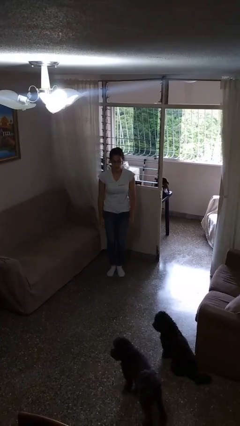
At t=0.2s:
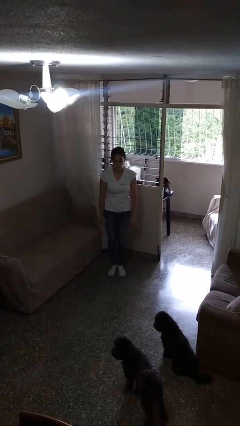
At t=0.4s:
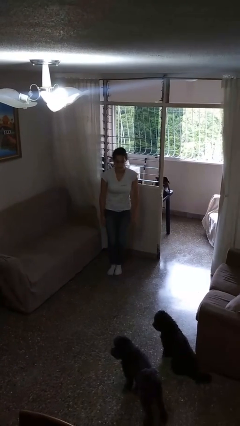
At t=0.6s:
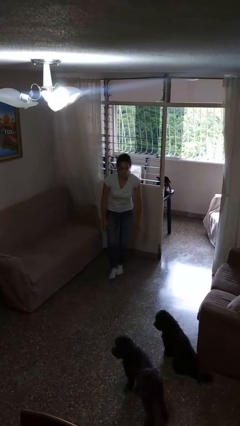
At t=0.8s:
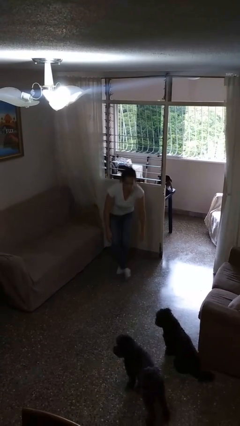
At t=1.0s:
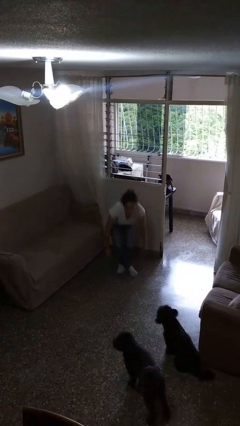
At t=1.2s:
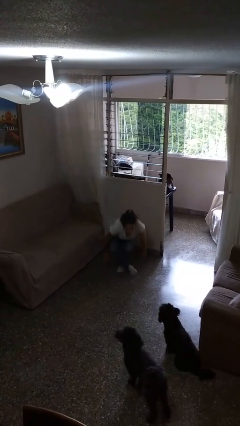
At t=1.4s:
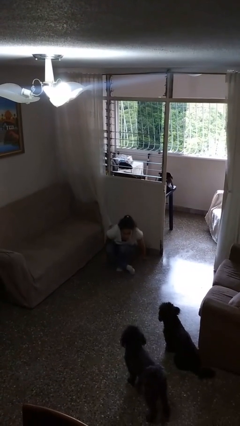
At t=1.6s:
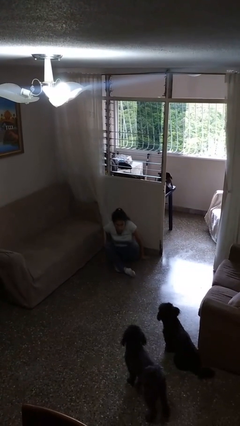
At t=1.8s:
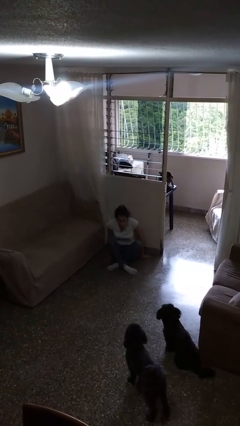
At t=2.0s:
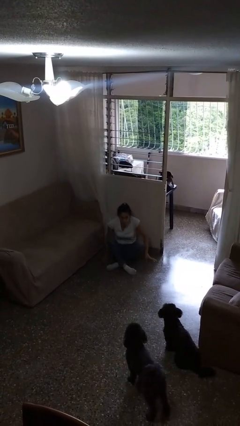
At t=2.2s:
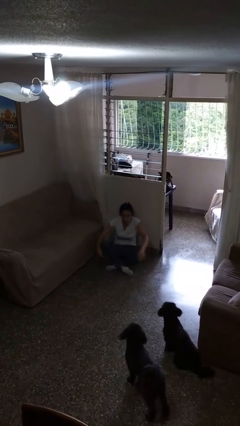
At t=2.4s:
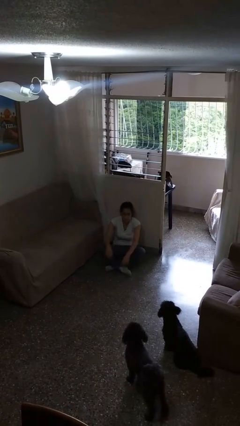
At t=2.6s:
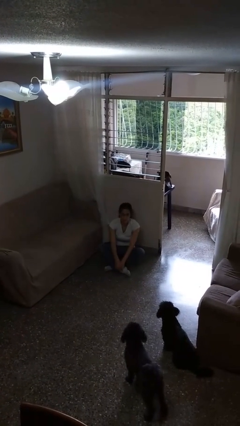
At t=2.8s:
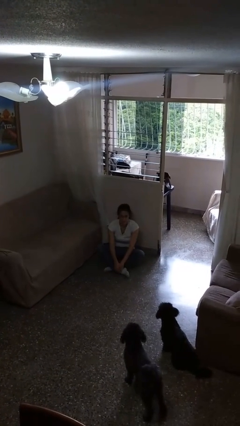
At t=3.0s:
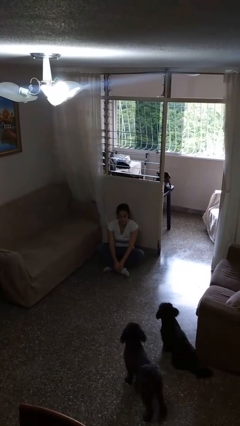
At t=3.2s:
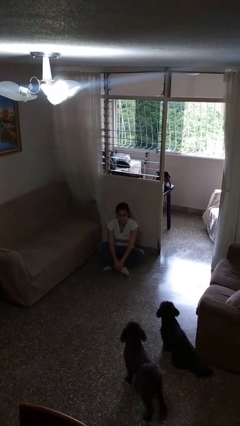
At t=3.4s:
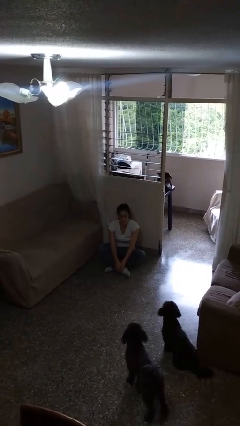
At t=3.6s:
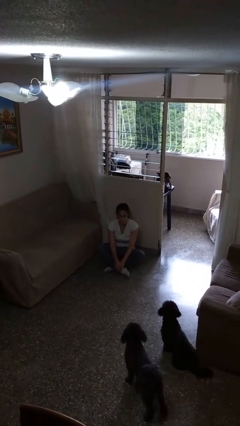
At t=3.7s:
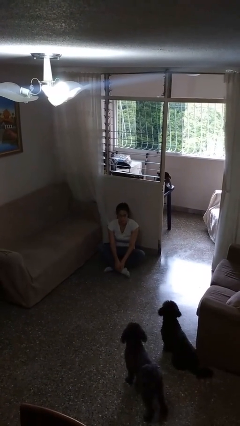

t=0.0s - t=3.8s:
person sits crisscross

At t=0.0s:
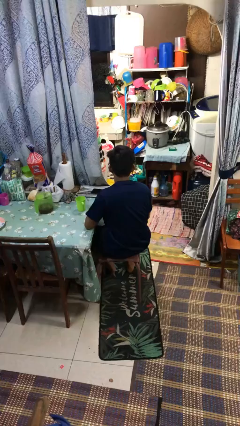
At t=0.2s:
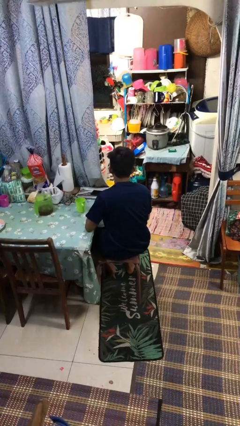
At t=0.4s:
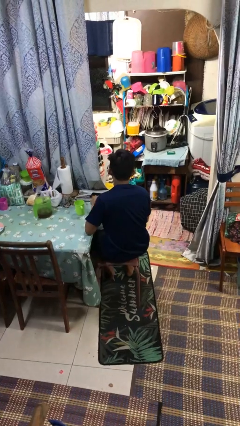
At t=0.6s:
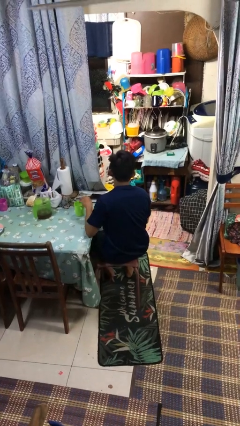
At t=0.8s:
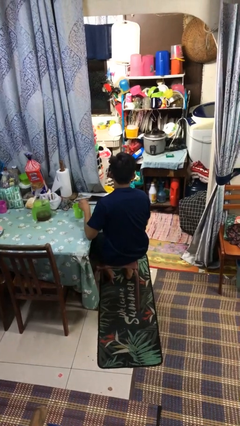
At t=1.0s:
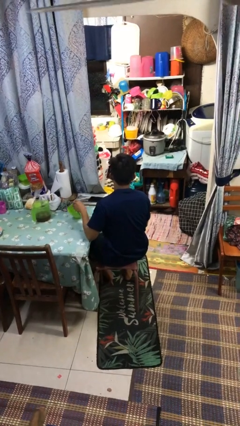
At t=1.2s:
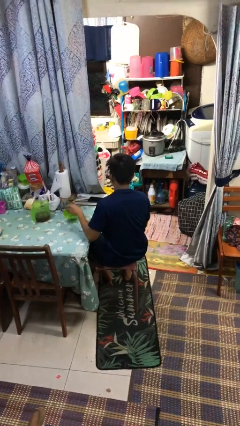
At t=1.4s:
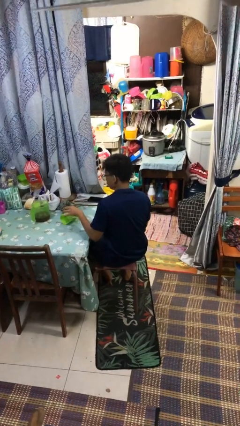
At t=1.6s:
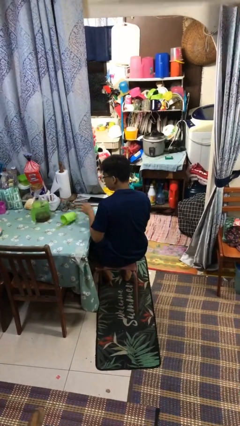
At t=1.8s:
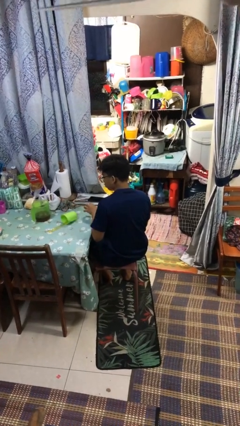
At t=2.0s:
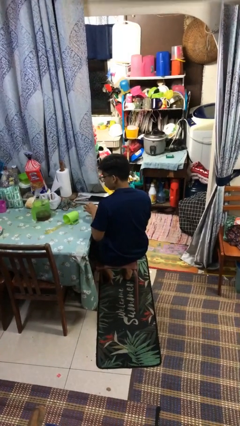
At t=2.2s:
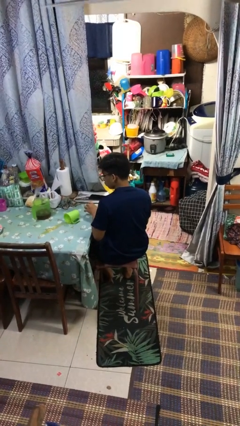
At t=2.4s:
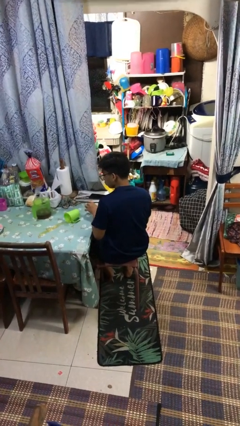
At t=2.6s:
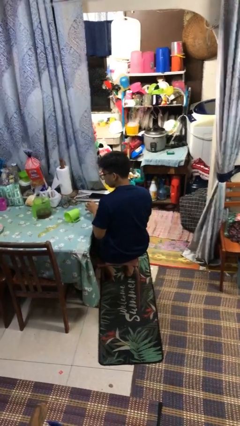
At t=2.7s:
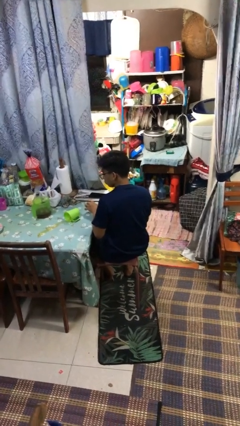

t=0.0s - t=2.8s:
person spills on table

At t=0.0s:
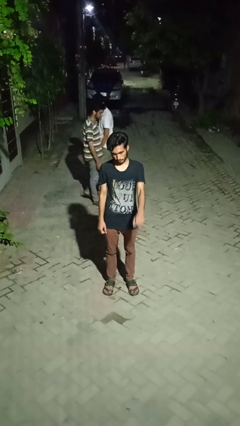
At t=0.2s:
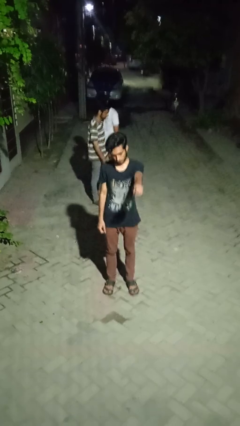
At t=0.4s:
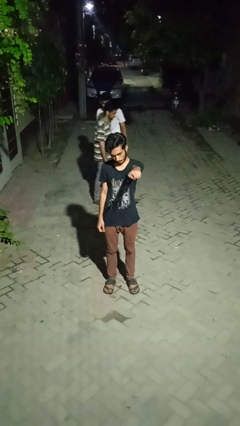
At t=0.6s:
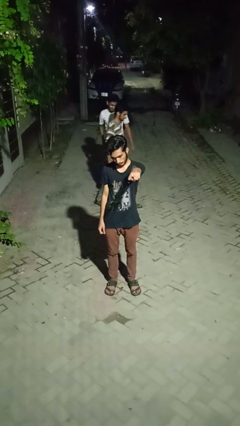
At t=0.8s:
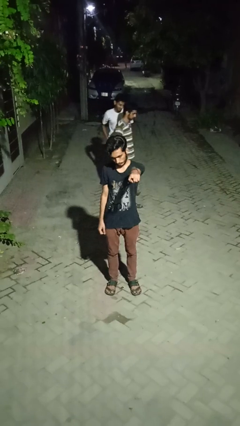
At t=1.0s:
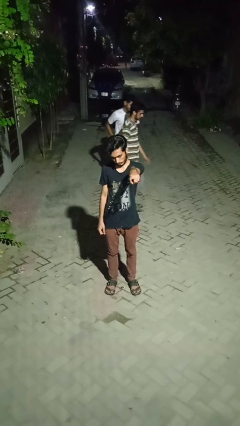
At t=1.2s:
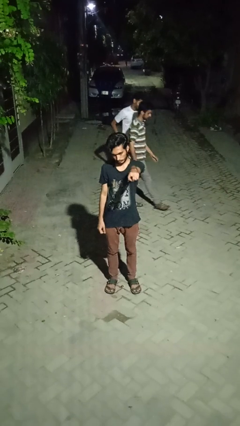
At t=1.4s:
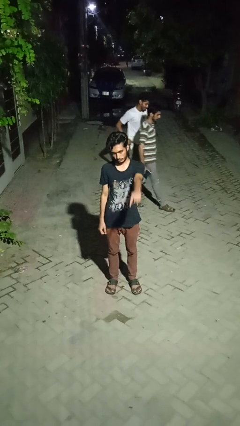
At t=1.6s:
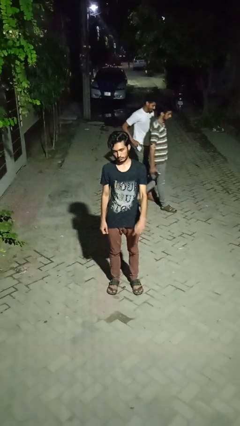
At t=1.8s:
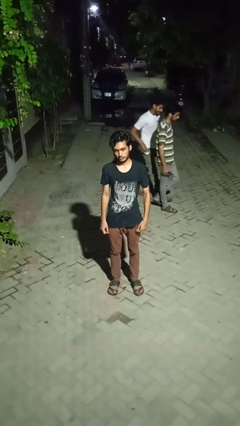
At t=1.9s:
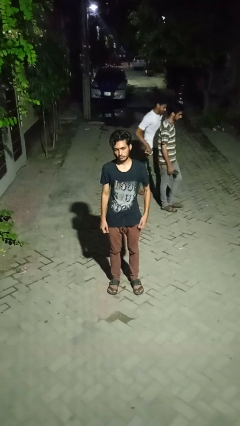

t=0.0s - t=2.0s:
person points at person

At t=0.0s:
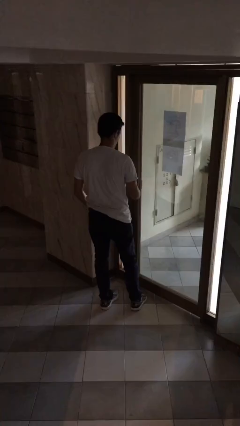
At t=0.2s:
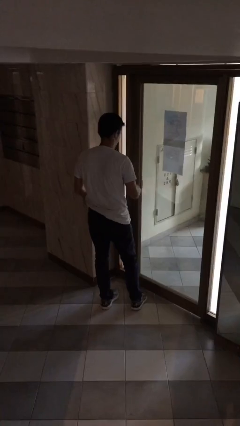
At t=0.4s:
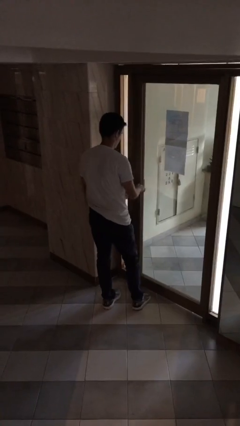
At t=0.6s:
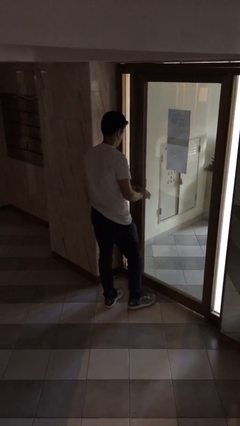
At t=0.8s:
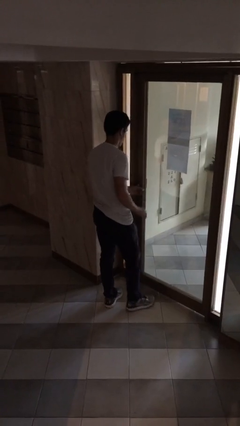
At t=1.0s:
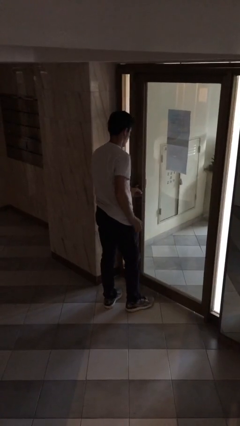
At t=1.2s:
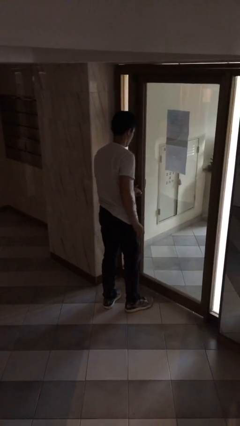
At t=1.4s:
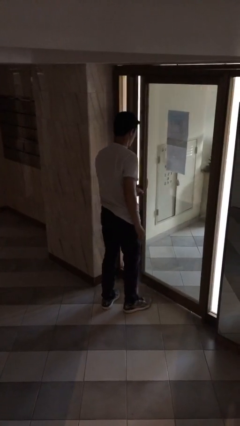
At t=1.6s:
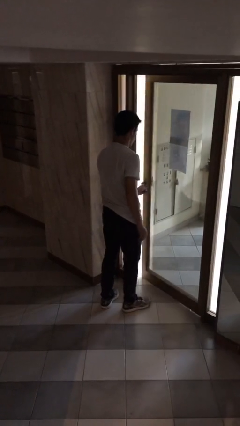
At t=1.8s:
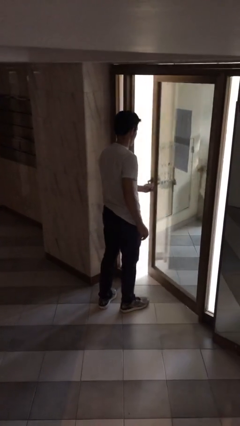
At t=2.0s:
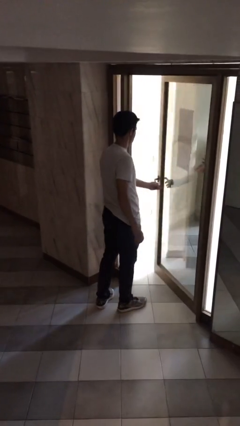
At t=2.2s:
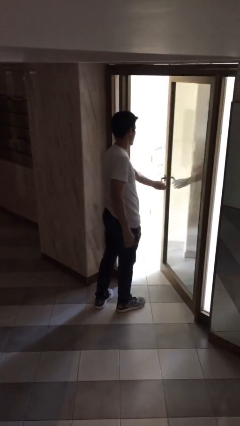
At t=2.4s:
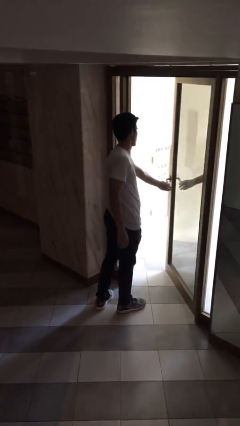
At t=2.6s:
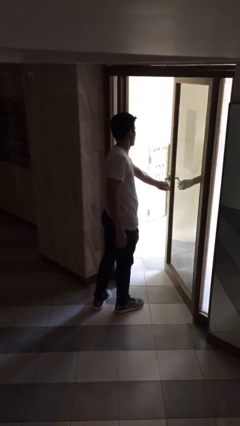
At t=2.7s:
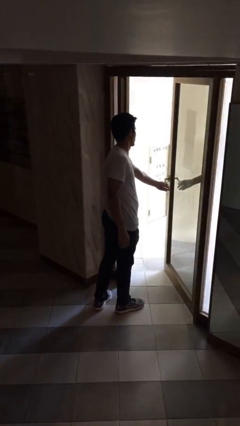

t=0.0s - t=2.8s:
person opens facility door

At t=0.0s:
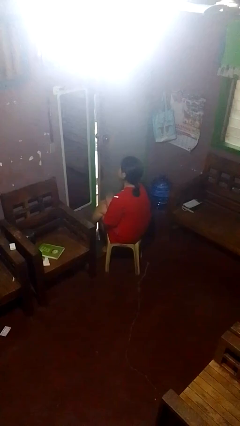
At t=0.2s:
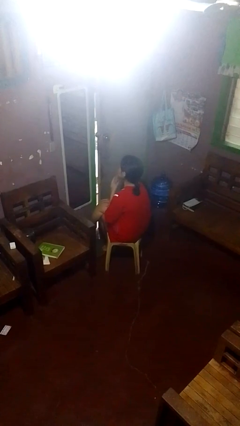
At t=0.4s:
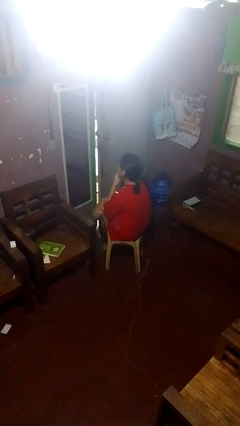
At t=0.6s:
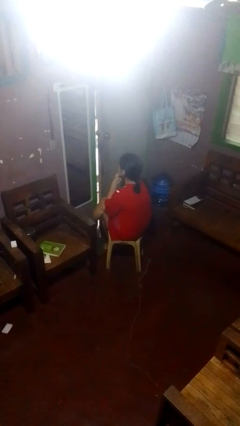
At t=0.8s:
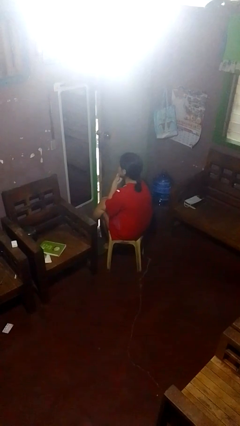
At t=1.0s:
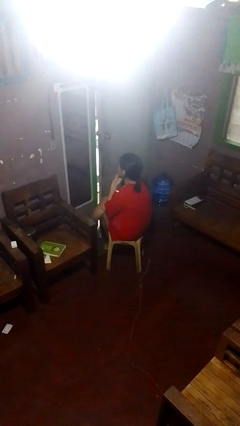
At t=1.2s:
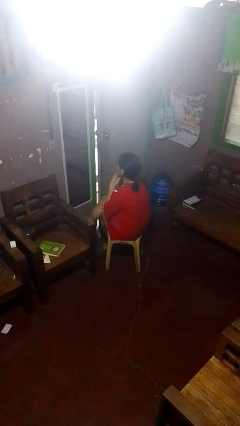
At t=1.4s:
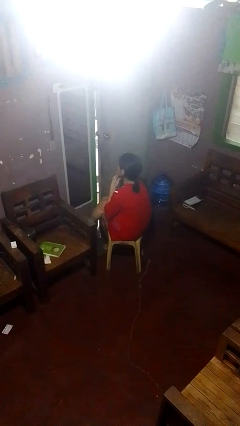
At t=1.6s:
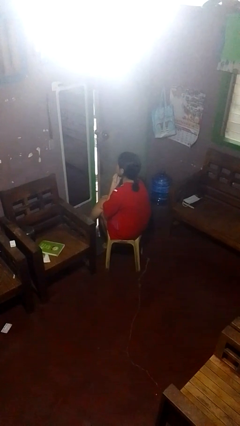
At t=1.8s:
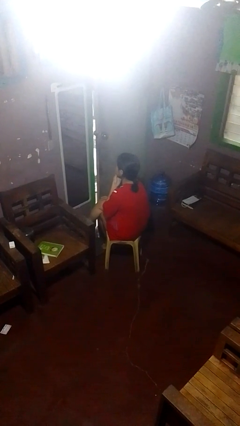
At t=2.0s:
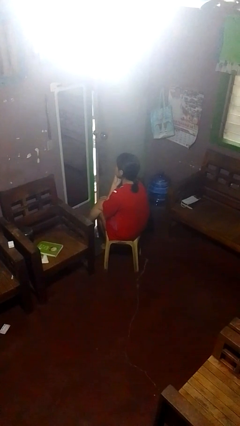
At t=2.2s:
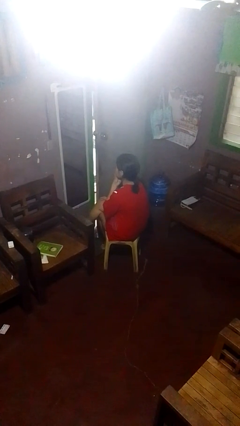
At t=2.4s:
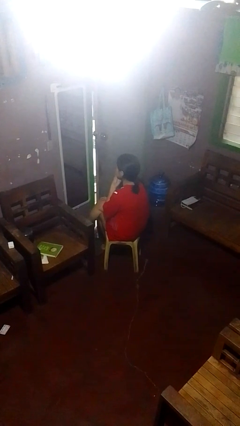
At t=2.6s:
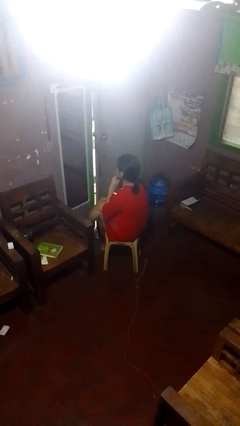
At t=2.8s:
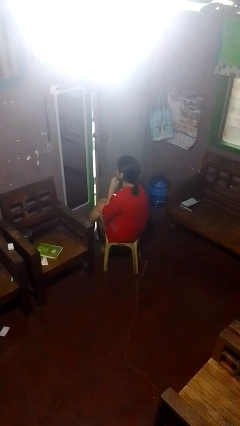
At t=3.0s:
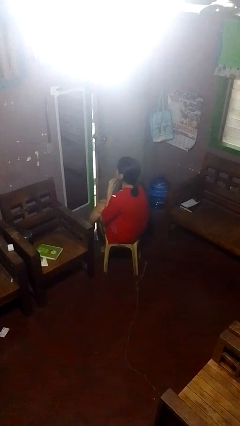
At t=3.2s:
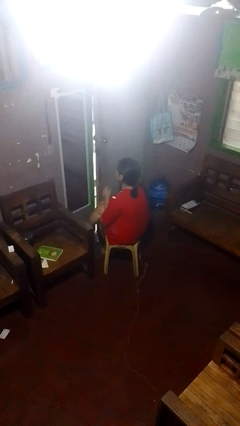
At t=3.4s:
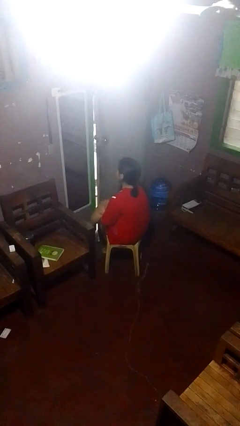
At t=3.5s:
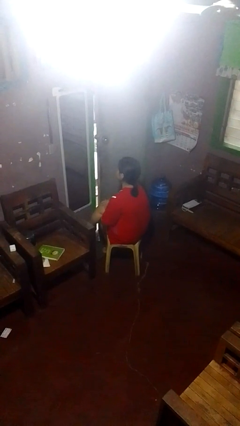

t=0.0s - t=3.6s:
person strokes chin

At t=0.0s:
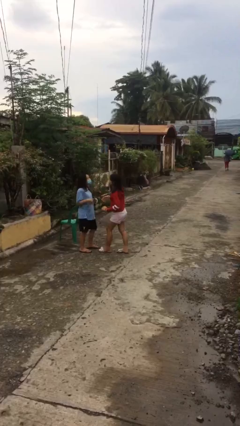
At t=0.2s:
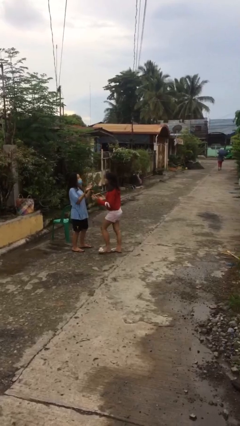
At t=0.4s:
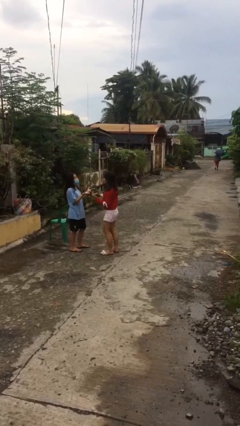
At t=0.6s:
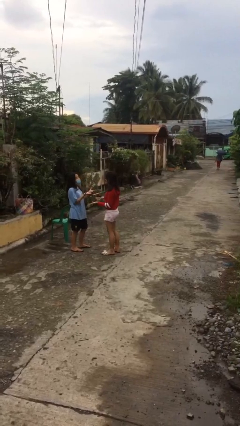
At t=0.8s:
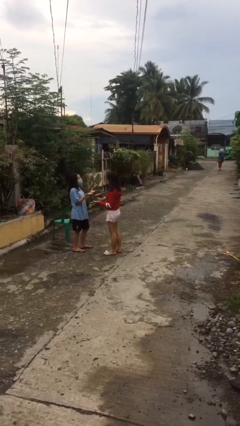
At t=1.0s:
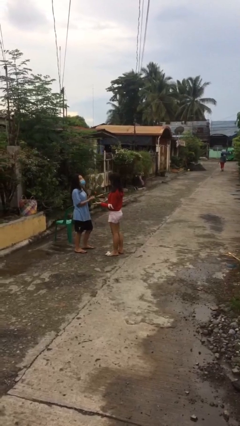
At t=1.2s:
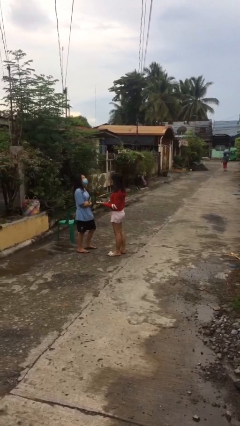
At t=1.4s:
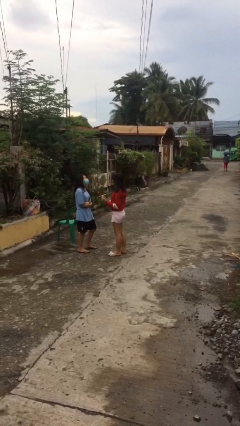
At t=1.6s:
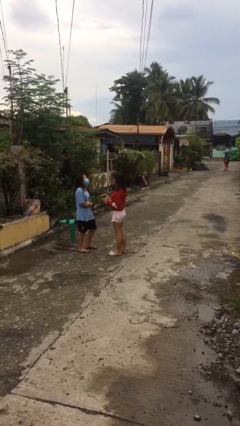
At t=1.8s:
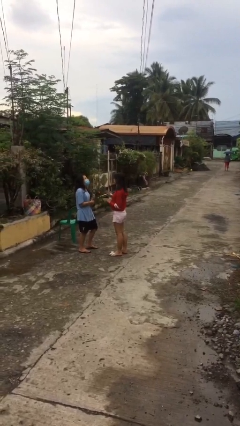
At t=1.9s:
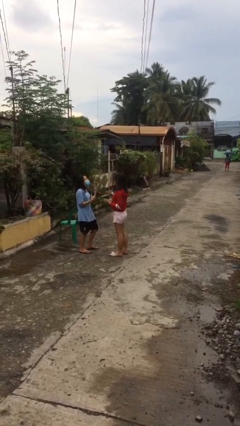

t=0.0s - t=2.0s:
person talks to person

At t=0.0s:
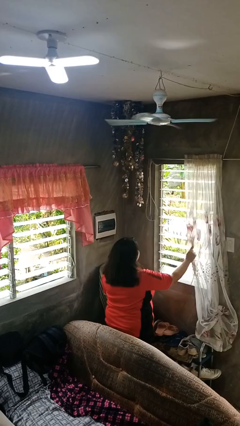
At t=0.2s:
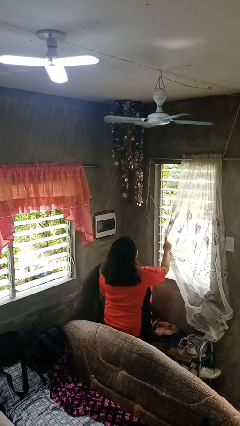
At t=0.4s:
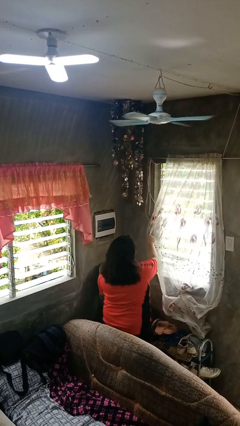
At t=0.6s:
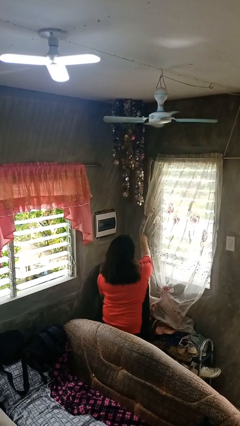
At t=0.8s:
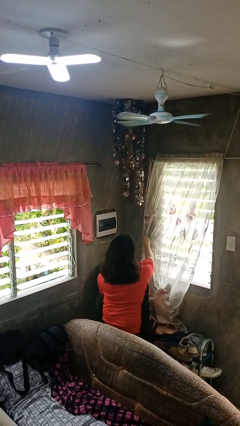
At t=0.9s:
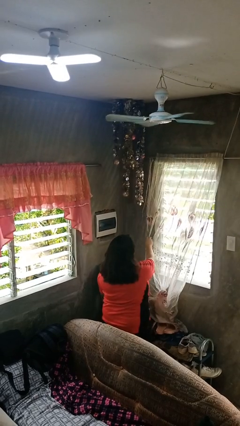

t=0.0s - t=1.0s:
person closes curtains
